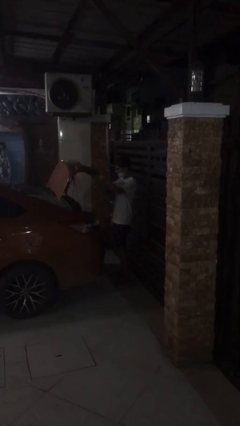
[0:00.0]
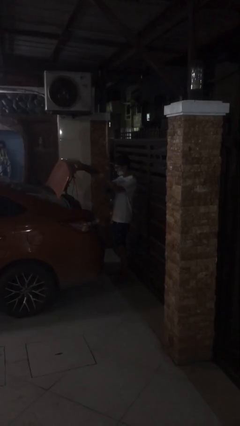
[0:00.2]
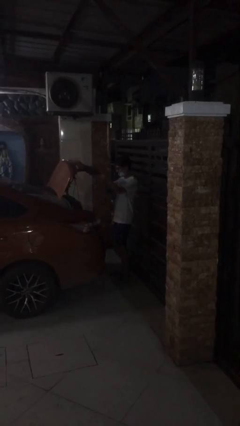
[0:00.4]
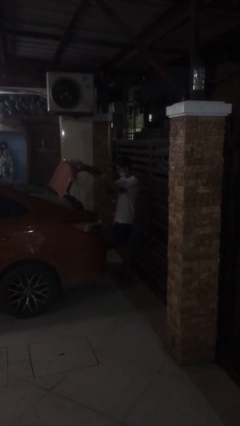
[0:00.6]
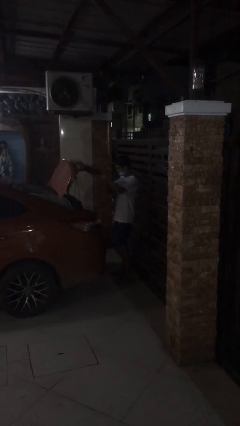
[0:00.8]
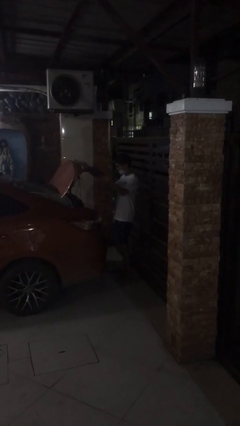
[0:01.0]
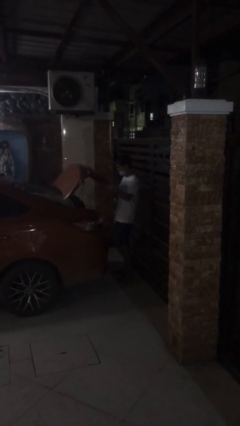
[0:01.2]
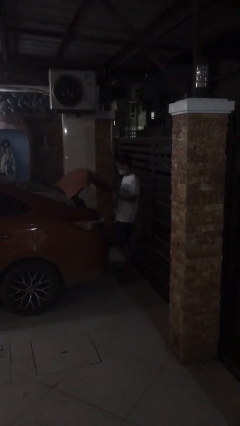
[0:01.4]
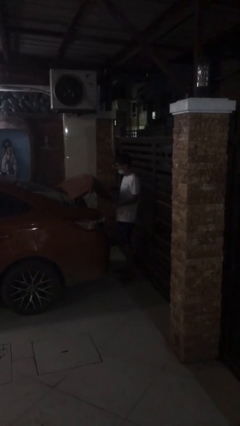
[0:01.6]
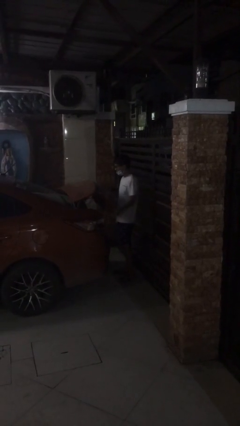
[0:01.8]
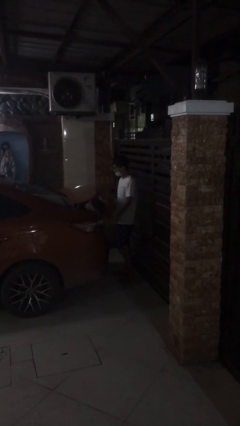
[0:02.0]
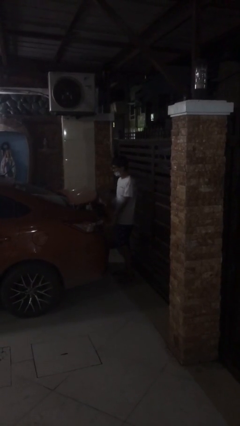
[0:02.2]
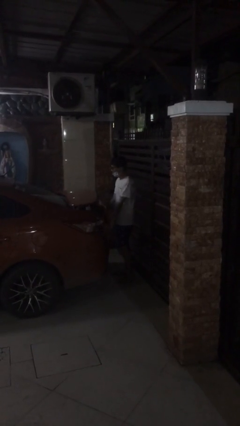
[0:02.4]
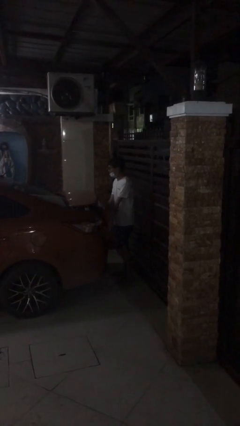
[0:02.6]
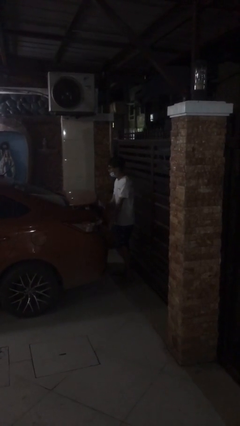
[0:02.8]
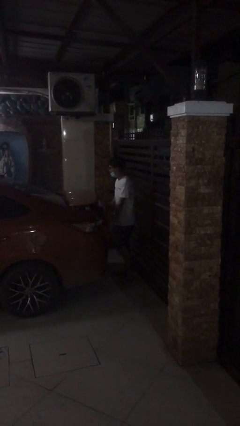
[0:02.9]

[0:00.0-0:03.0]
person closes car trunk

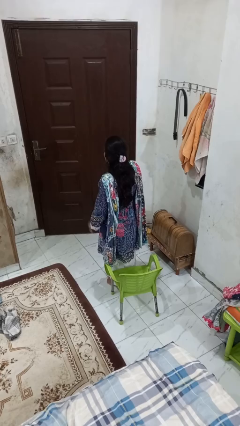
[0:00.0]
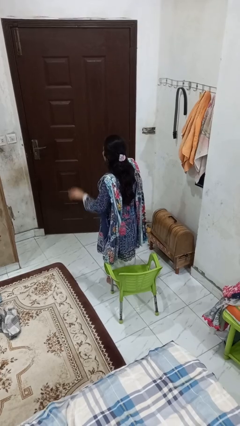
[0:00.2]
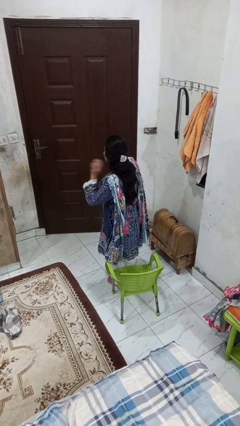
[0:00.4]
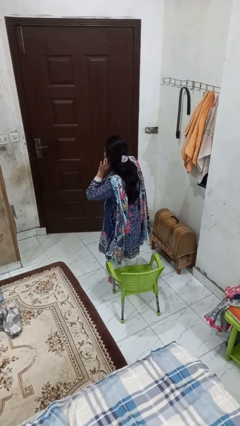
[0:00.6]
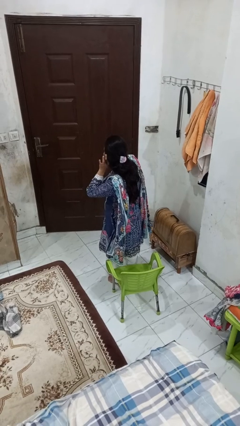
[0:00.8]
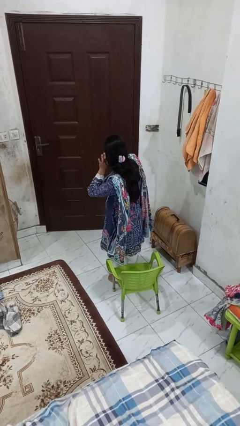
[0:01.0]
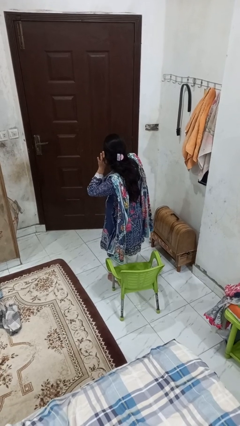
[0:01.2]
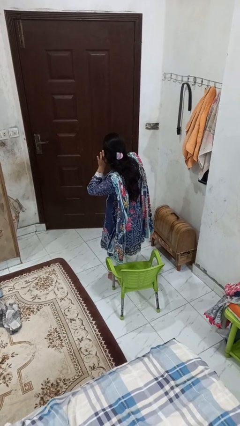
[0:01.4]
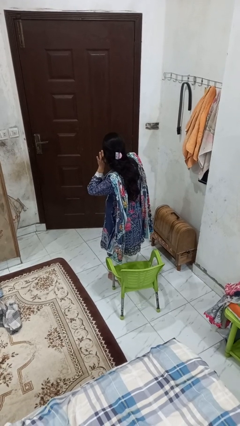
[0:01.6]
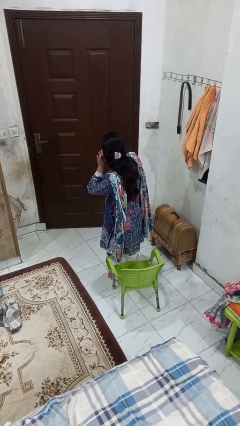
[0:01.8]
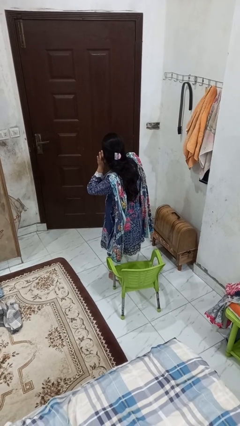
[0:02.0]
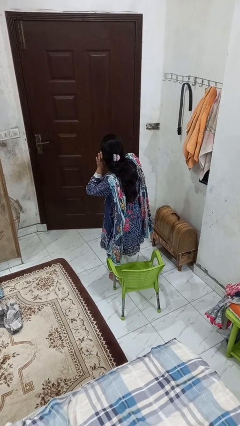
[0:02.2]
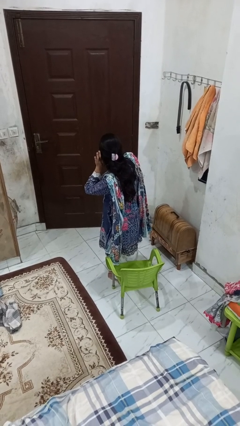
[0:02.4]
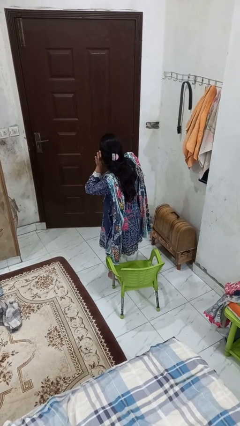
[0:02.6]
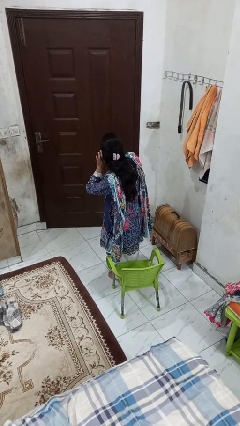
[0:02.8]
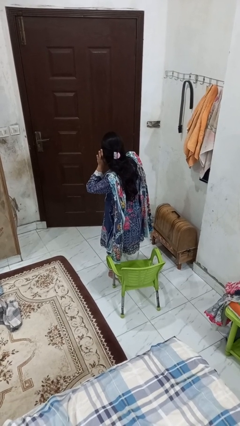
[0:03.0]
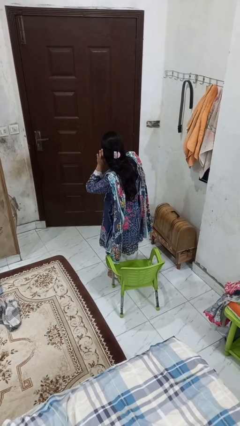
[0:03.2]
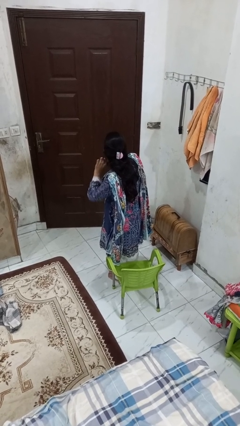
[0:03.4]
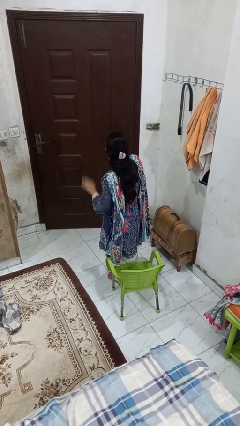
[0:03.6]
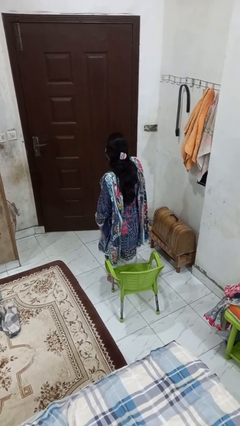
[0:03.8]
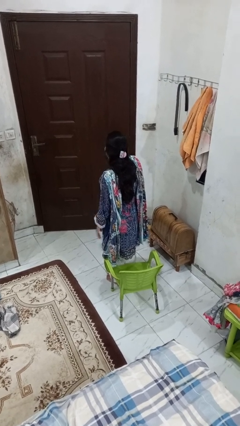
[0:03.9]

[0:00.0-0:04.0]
person gestures listen closely

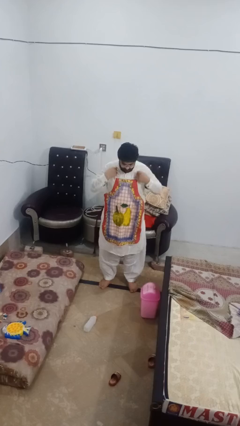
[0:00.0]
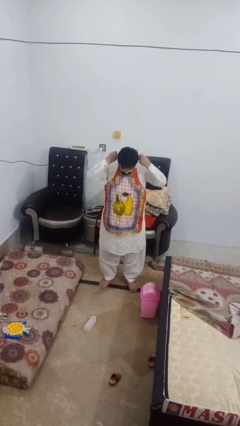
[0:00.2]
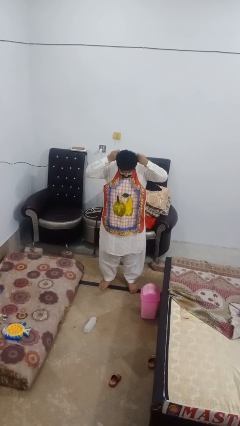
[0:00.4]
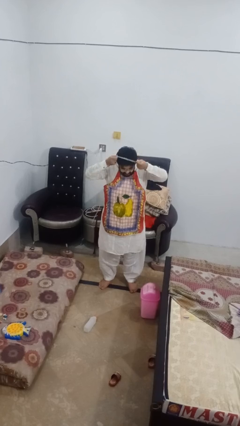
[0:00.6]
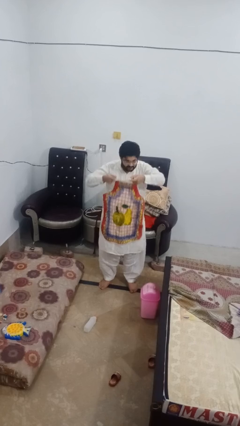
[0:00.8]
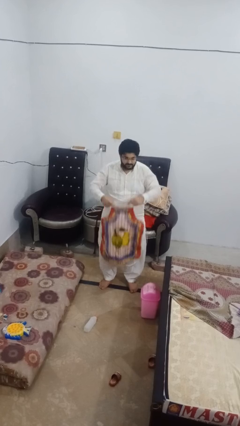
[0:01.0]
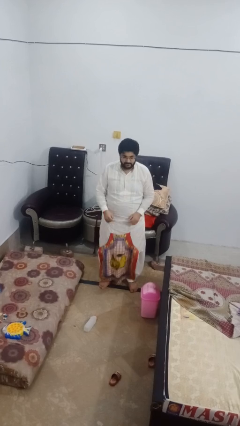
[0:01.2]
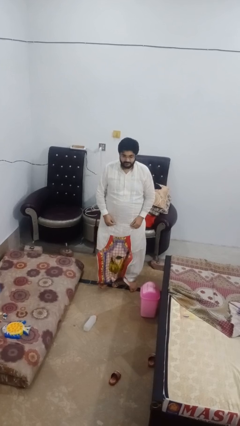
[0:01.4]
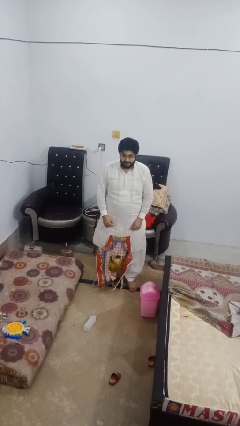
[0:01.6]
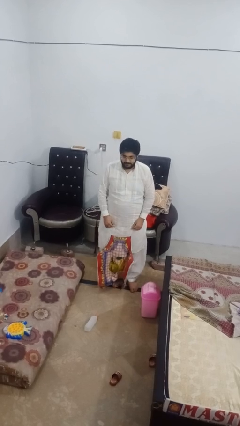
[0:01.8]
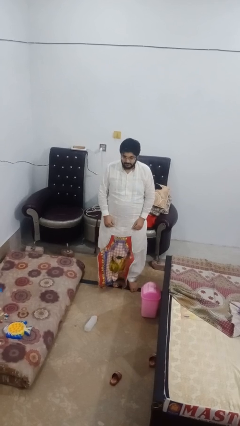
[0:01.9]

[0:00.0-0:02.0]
person takes off apron

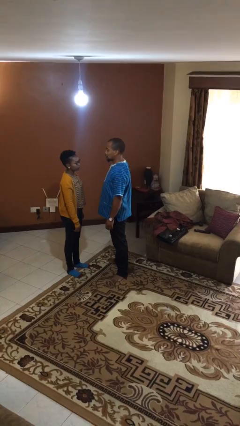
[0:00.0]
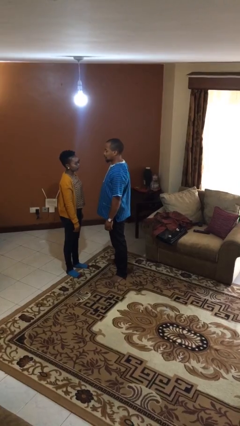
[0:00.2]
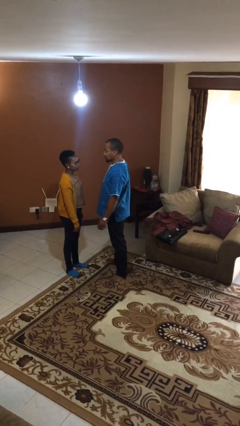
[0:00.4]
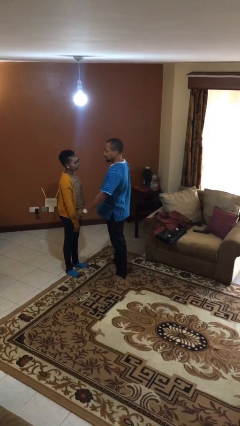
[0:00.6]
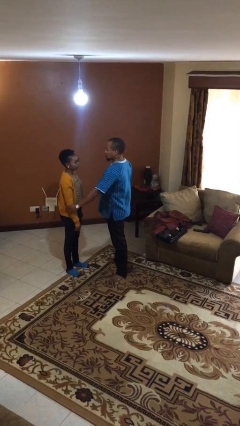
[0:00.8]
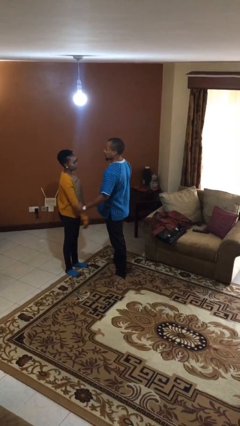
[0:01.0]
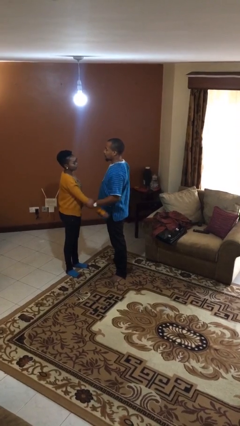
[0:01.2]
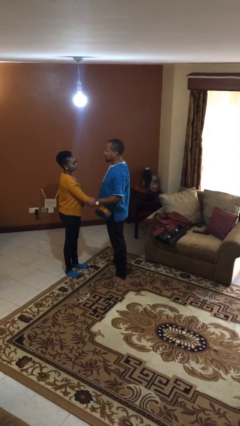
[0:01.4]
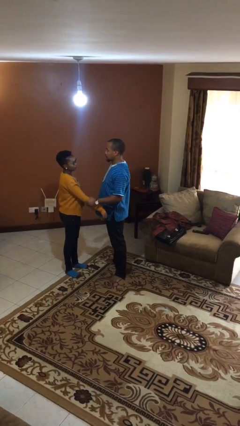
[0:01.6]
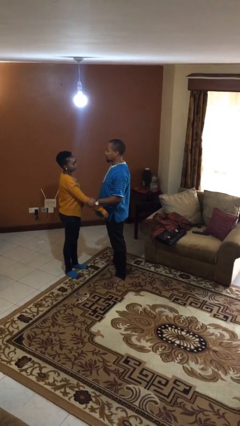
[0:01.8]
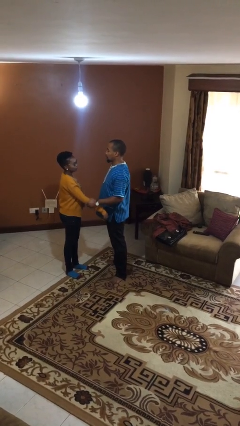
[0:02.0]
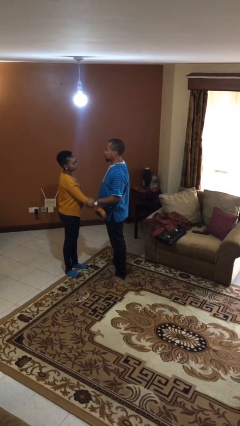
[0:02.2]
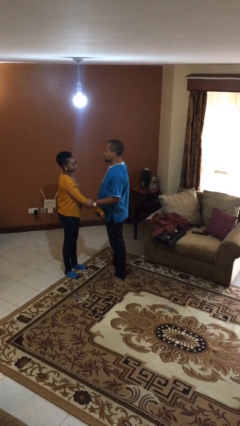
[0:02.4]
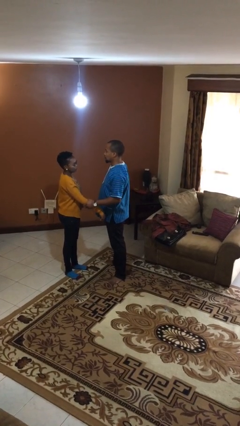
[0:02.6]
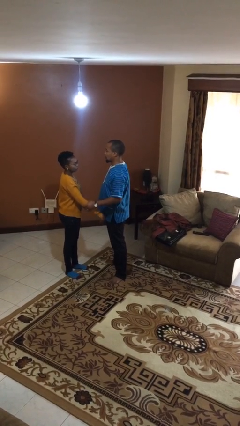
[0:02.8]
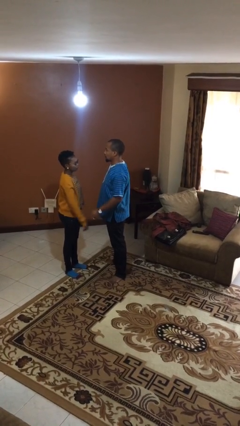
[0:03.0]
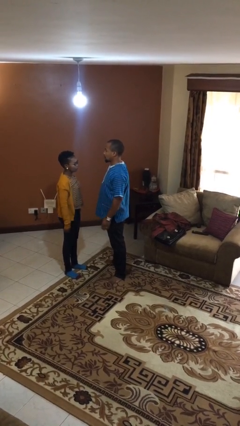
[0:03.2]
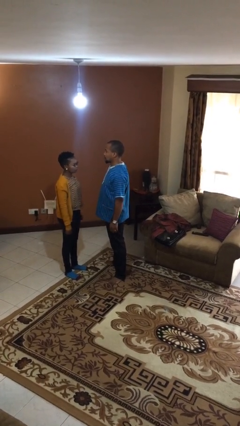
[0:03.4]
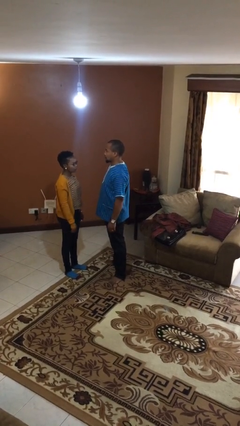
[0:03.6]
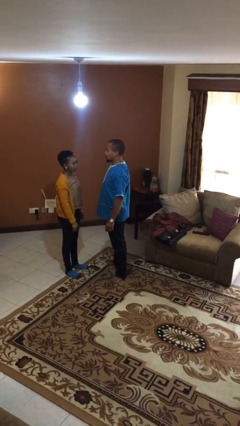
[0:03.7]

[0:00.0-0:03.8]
person grabs person by forearm

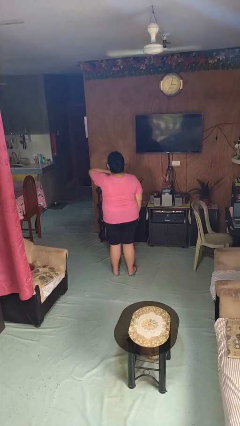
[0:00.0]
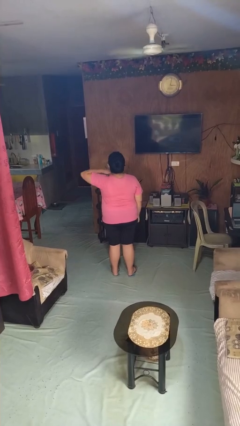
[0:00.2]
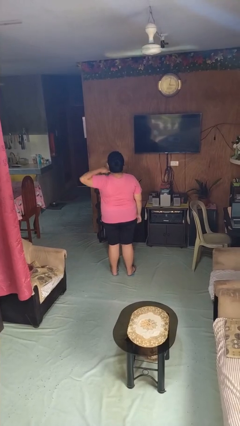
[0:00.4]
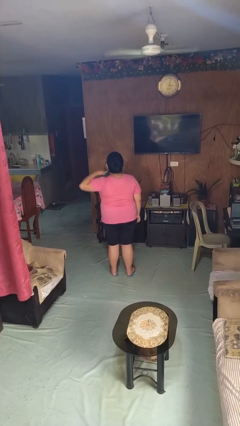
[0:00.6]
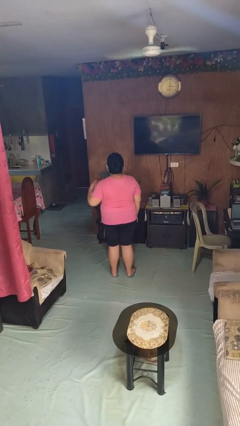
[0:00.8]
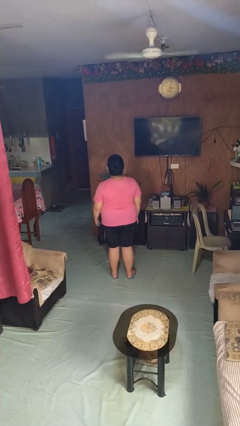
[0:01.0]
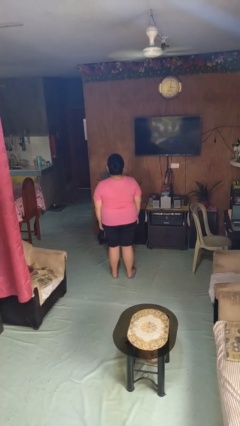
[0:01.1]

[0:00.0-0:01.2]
person gestures cut

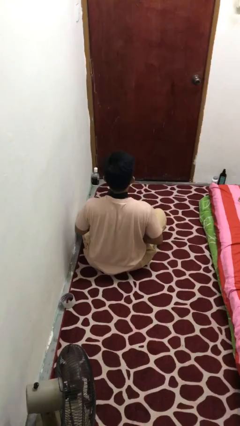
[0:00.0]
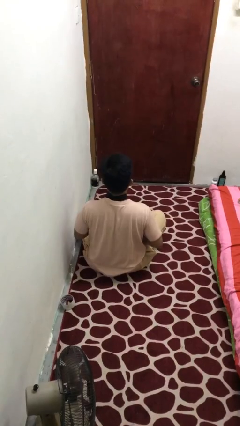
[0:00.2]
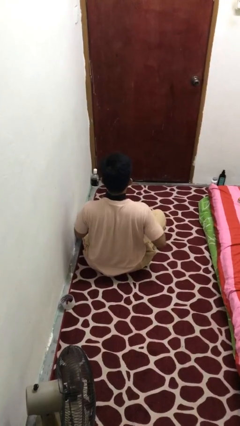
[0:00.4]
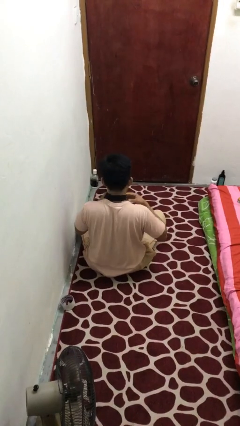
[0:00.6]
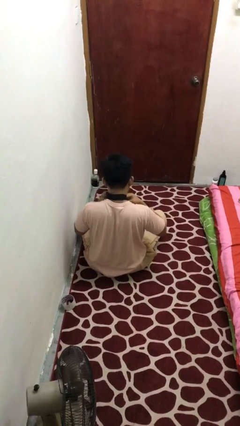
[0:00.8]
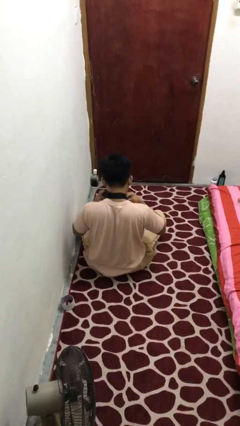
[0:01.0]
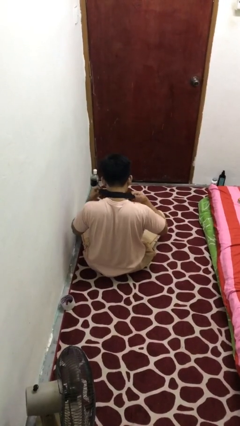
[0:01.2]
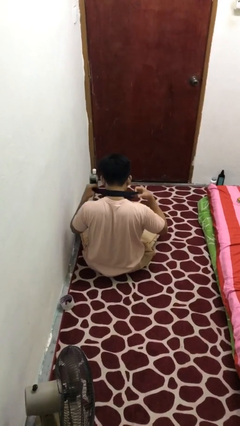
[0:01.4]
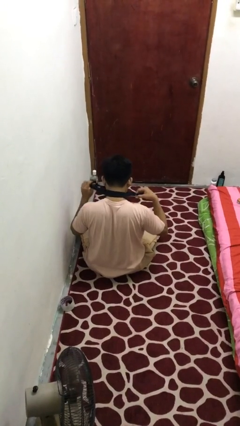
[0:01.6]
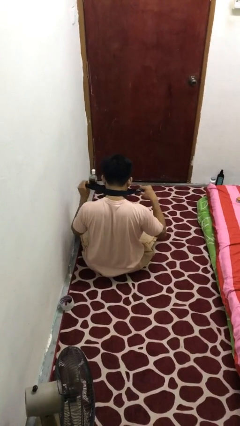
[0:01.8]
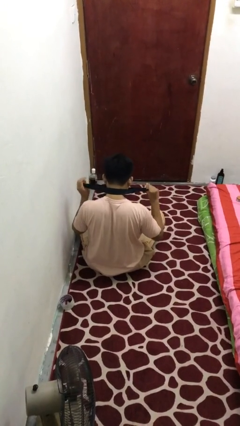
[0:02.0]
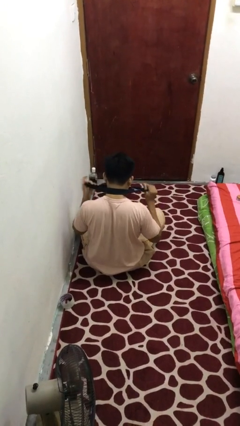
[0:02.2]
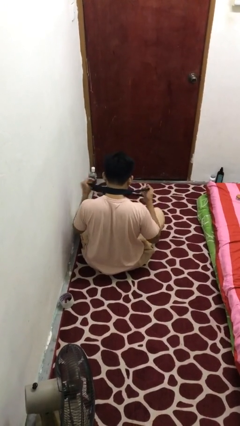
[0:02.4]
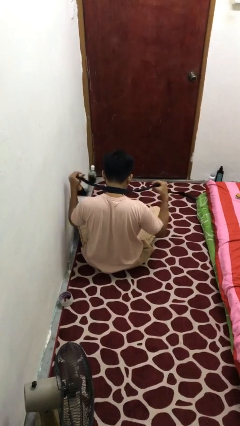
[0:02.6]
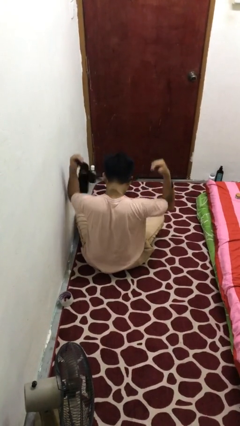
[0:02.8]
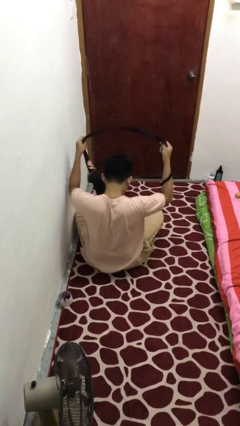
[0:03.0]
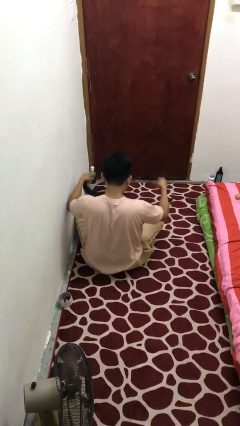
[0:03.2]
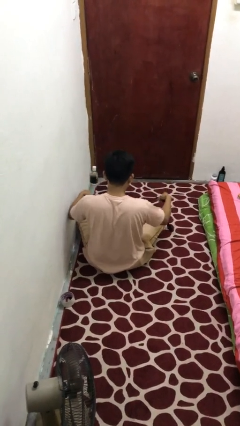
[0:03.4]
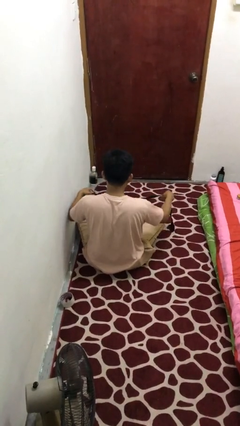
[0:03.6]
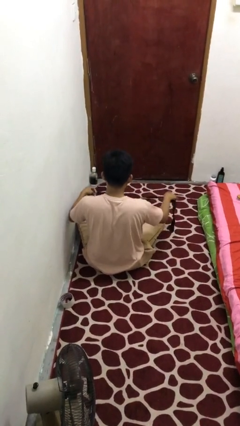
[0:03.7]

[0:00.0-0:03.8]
person takes off necktie

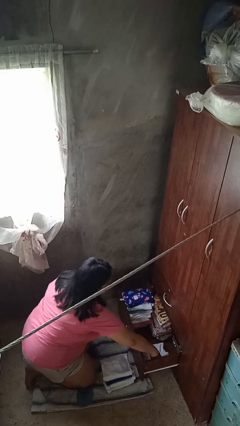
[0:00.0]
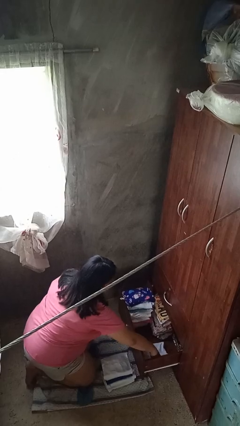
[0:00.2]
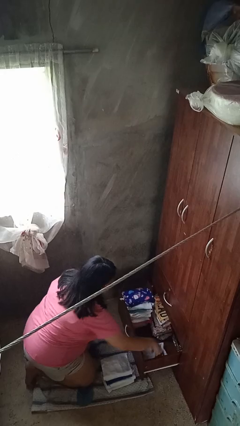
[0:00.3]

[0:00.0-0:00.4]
person puts clothes into dresser
